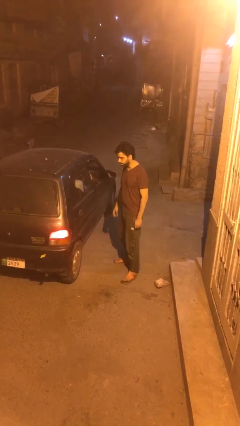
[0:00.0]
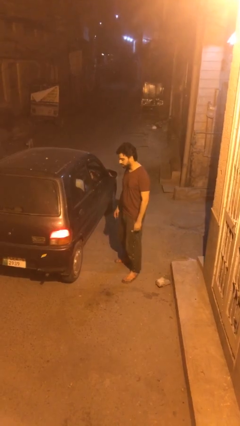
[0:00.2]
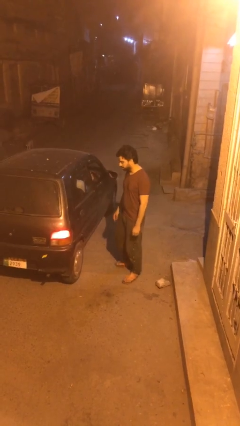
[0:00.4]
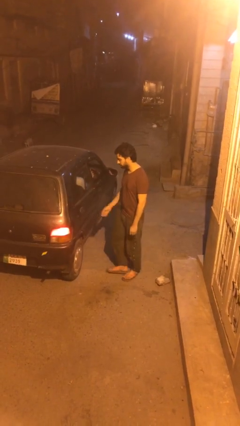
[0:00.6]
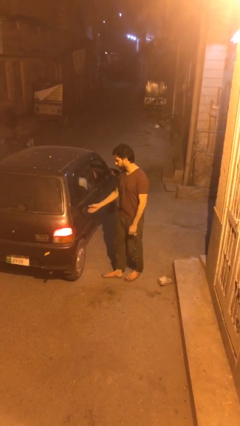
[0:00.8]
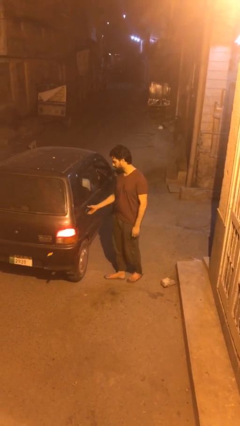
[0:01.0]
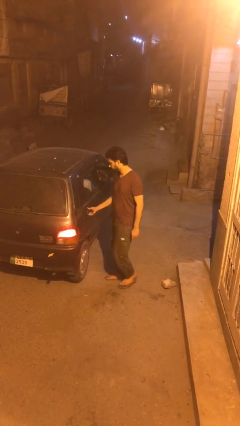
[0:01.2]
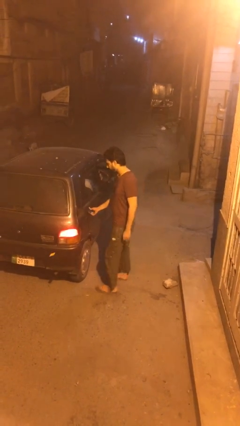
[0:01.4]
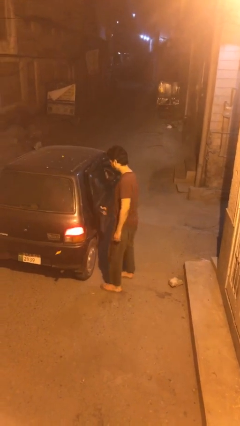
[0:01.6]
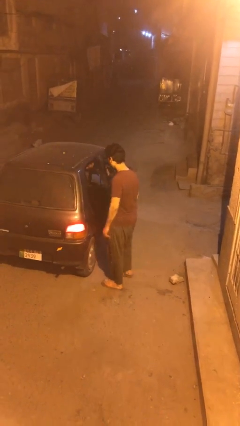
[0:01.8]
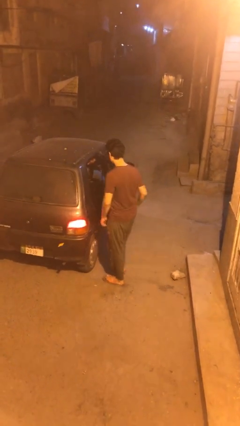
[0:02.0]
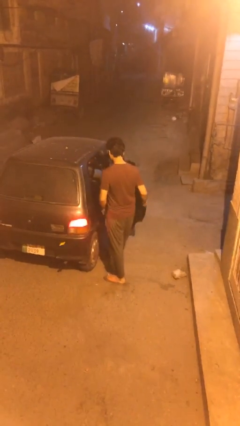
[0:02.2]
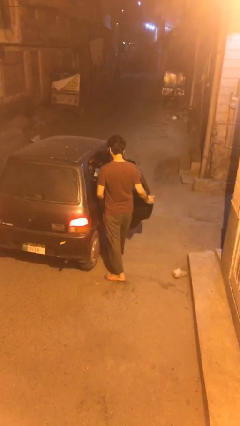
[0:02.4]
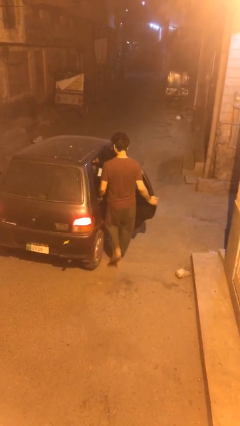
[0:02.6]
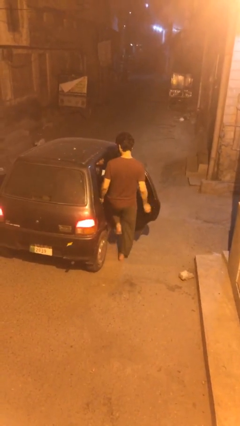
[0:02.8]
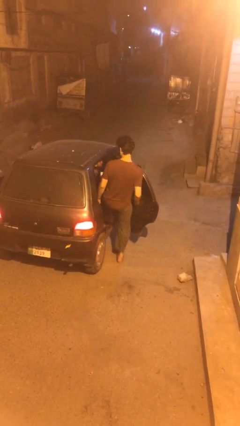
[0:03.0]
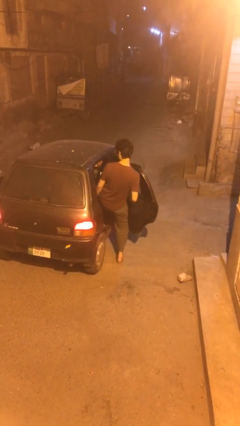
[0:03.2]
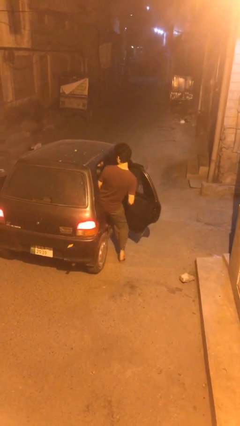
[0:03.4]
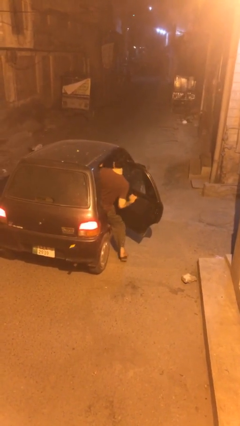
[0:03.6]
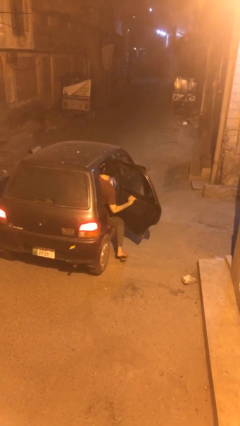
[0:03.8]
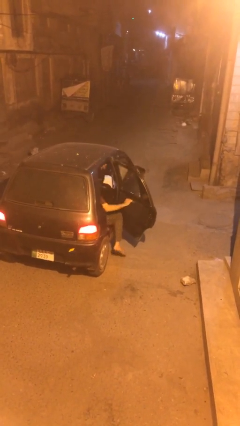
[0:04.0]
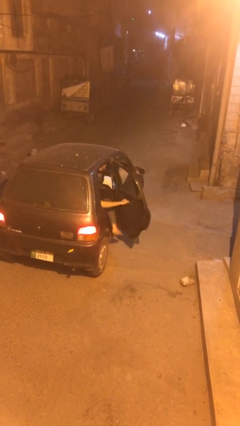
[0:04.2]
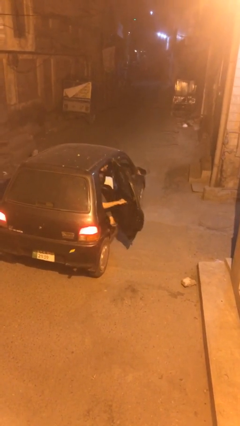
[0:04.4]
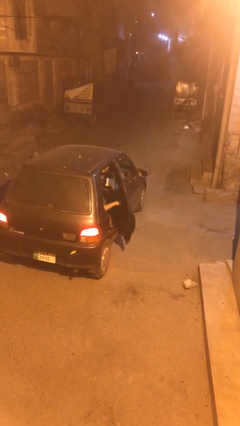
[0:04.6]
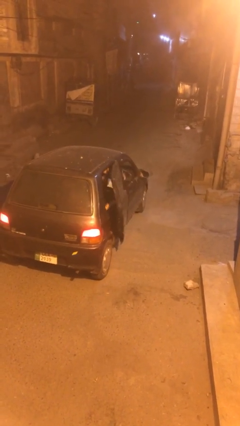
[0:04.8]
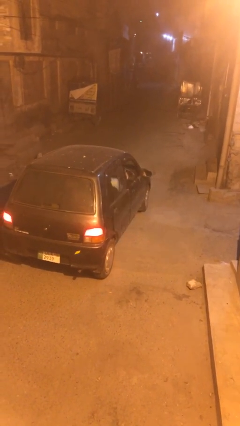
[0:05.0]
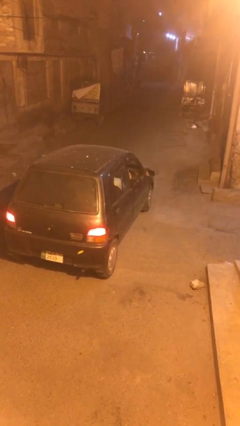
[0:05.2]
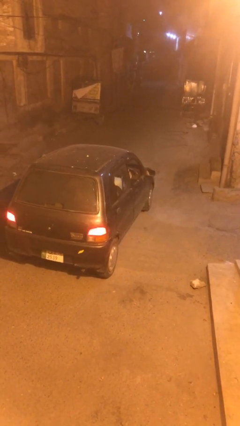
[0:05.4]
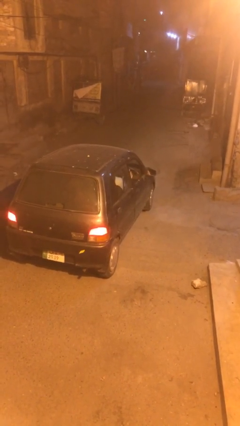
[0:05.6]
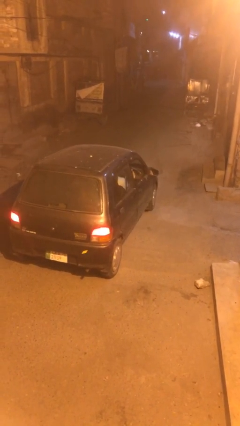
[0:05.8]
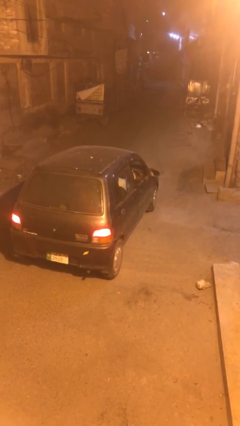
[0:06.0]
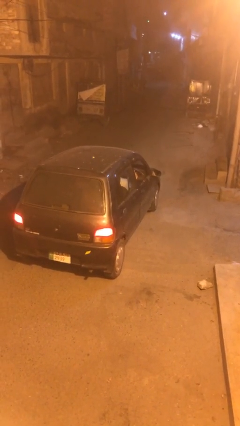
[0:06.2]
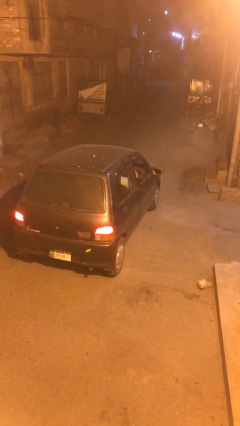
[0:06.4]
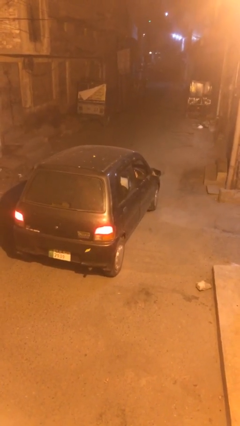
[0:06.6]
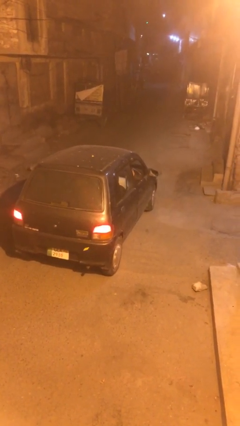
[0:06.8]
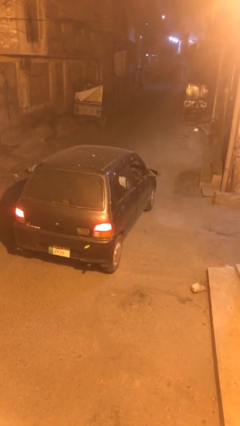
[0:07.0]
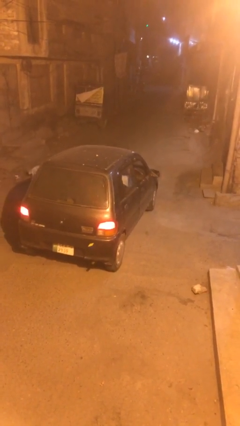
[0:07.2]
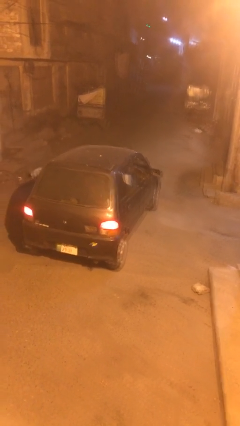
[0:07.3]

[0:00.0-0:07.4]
car picks up person

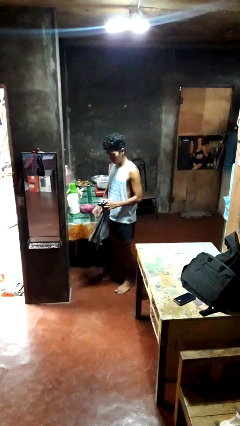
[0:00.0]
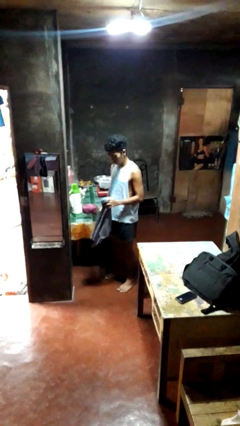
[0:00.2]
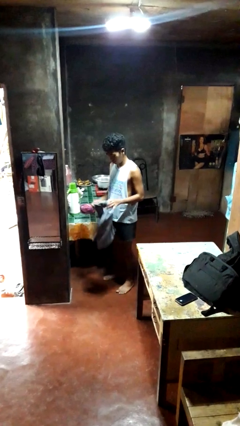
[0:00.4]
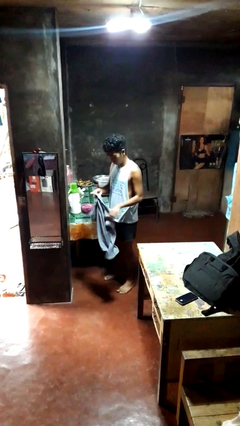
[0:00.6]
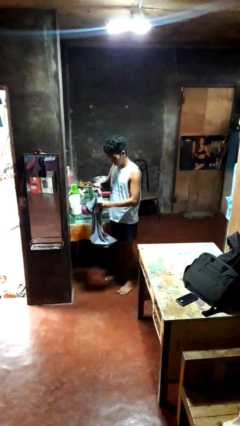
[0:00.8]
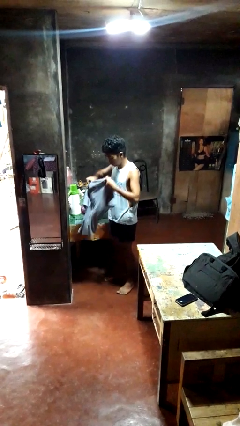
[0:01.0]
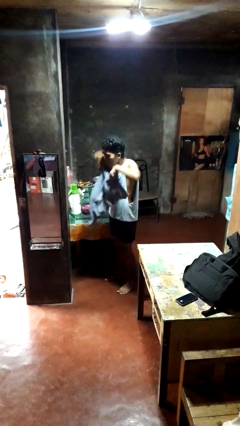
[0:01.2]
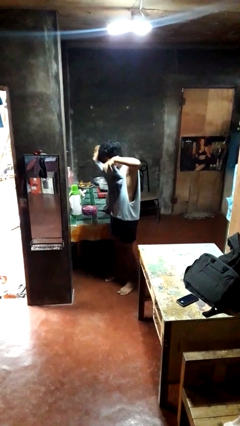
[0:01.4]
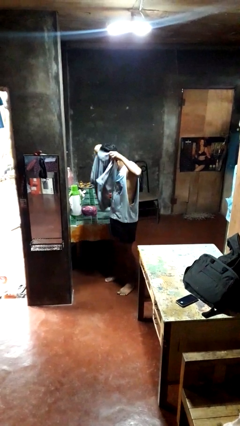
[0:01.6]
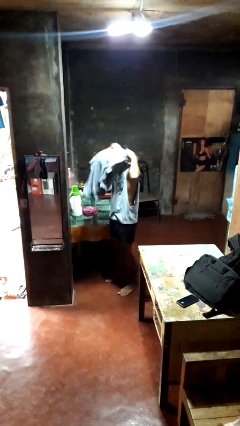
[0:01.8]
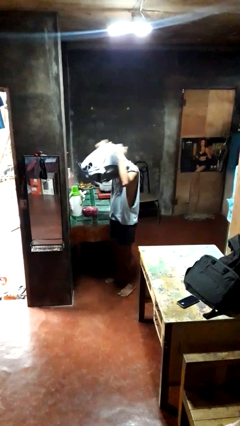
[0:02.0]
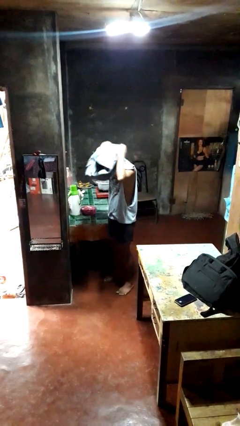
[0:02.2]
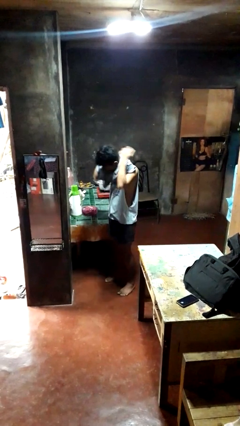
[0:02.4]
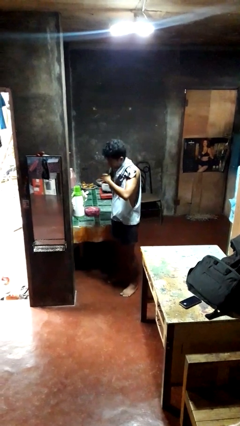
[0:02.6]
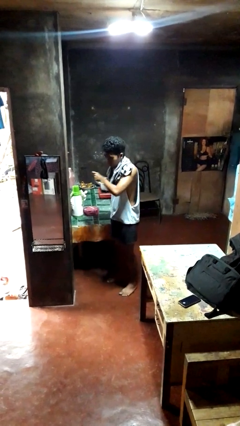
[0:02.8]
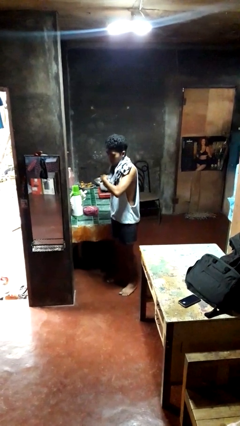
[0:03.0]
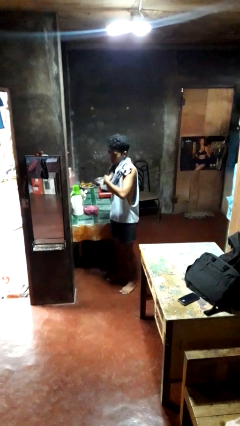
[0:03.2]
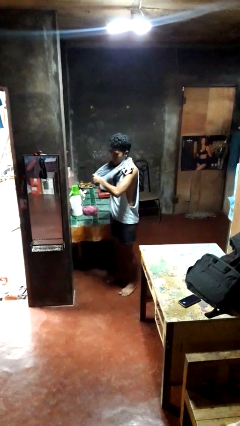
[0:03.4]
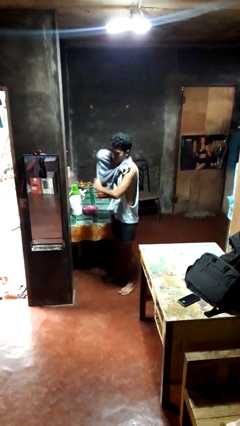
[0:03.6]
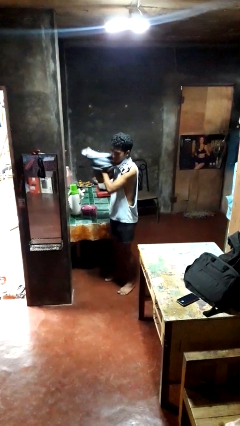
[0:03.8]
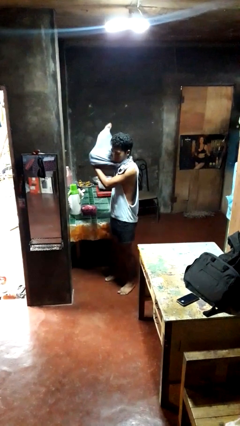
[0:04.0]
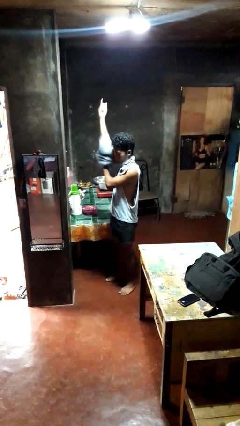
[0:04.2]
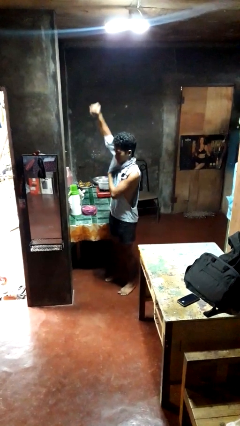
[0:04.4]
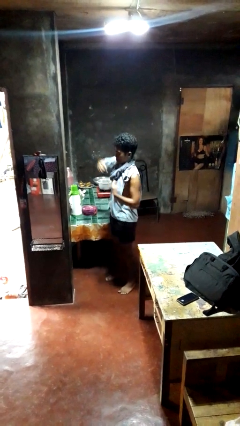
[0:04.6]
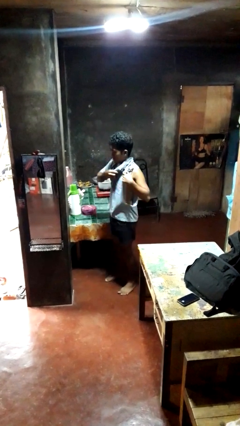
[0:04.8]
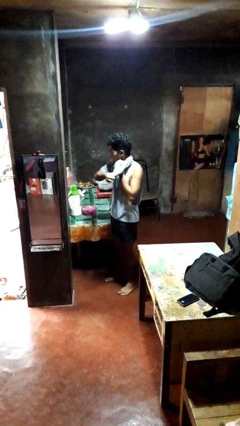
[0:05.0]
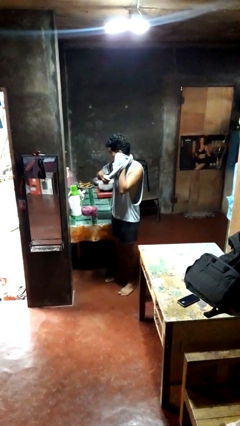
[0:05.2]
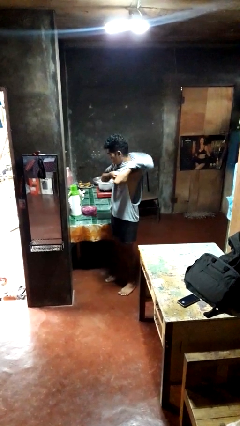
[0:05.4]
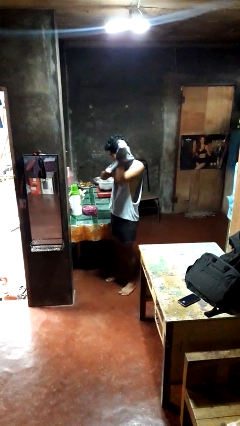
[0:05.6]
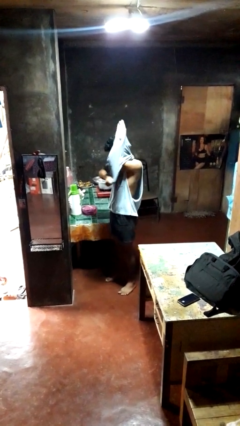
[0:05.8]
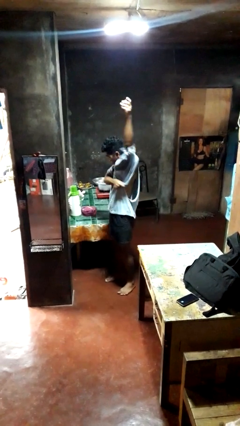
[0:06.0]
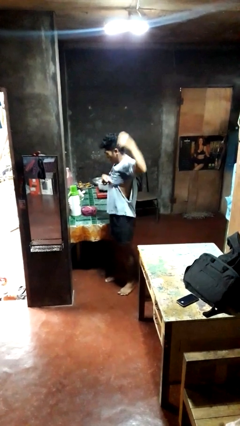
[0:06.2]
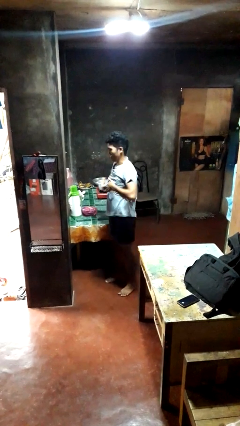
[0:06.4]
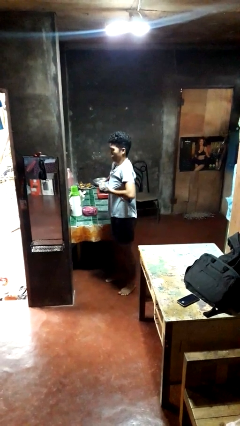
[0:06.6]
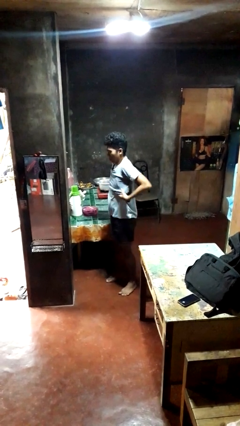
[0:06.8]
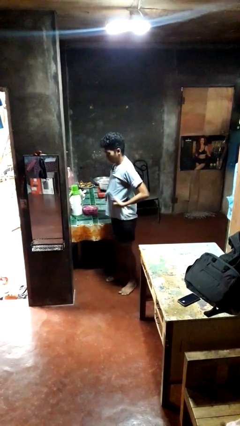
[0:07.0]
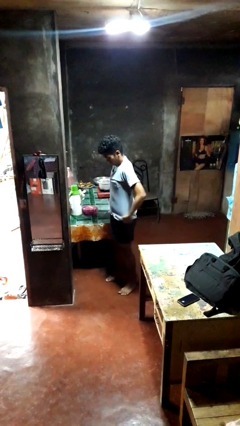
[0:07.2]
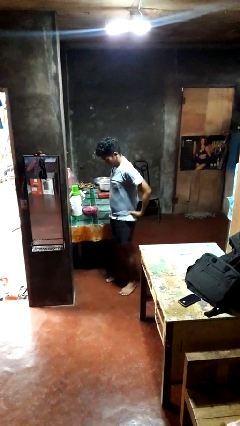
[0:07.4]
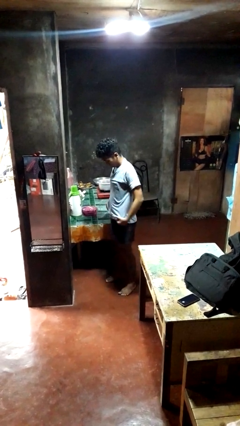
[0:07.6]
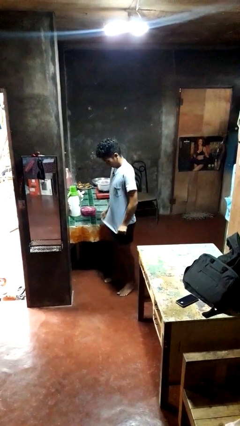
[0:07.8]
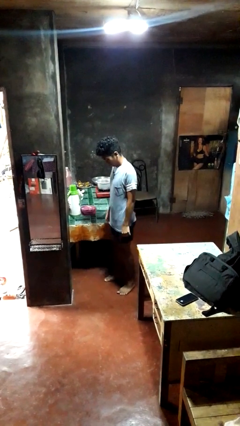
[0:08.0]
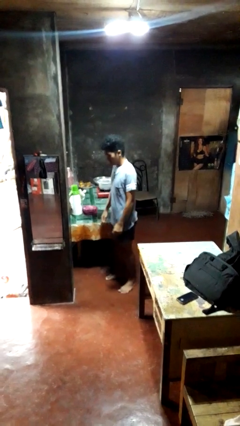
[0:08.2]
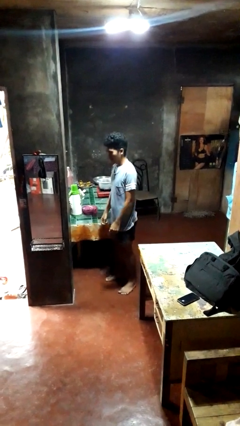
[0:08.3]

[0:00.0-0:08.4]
person puts on shirt

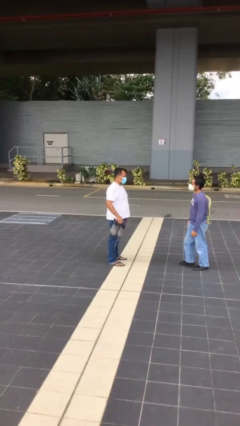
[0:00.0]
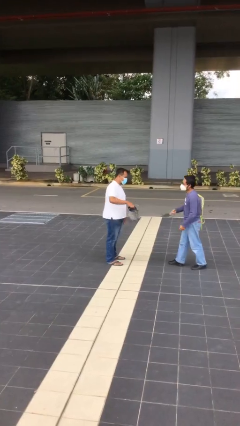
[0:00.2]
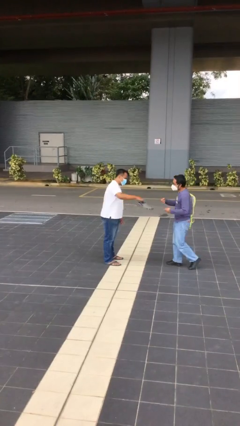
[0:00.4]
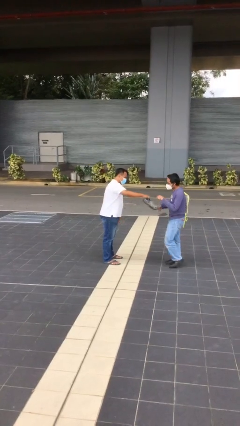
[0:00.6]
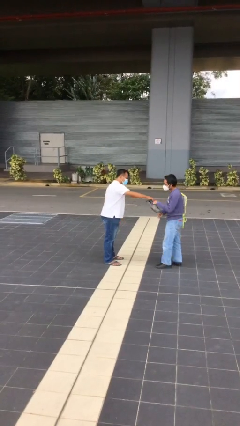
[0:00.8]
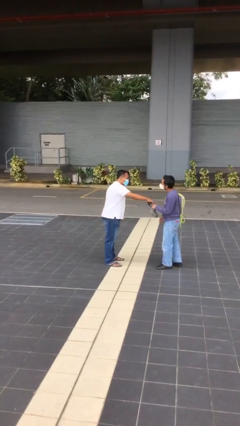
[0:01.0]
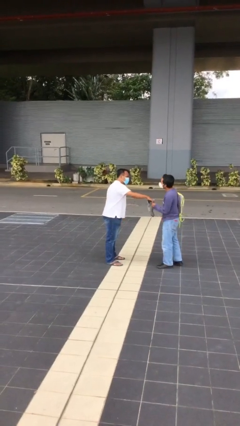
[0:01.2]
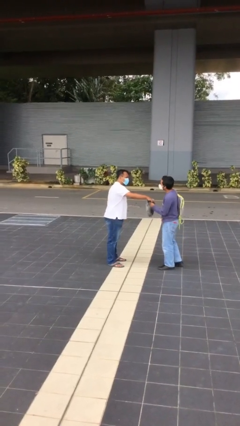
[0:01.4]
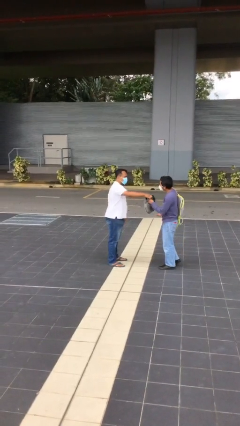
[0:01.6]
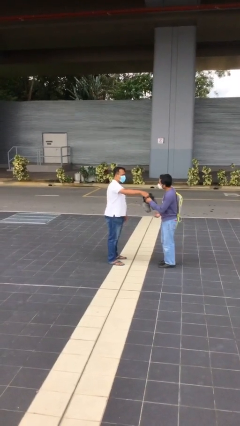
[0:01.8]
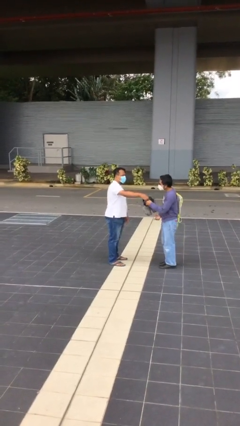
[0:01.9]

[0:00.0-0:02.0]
person transfers object to person
